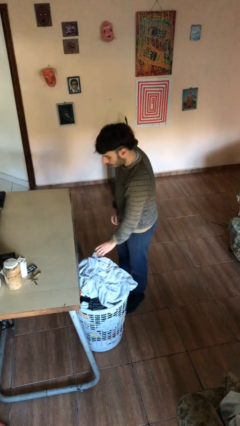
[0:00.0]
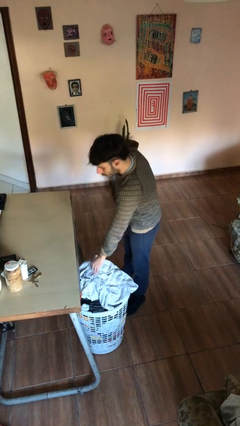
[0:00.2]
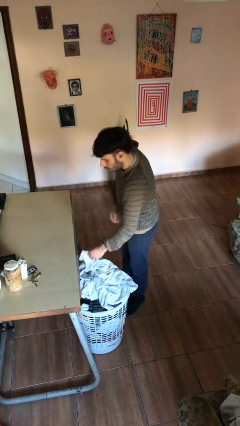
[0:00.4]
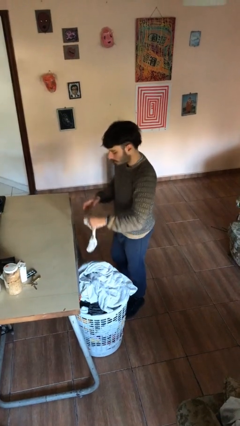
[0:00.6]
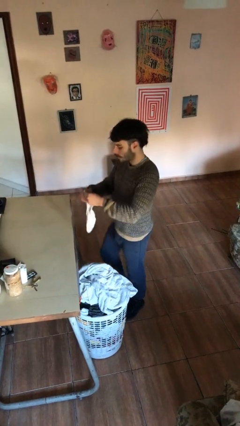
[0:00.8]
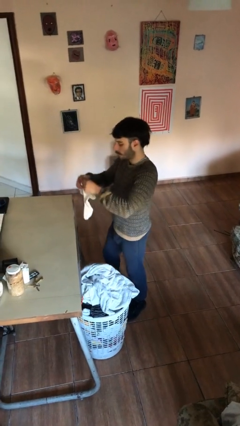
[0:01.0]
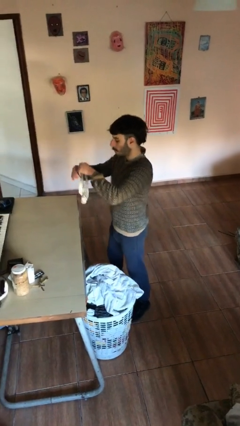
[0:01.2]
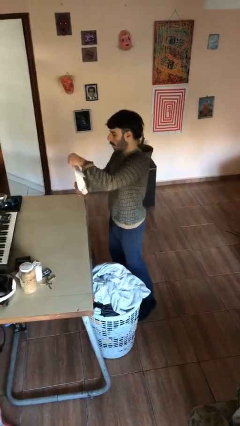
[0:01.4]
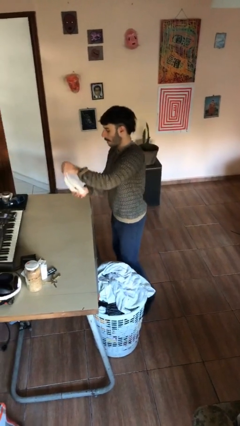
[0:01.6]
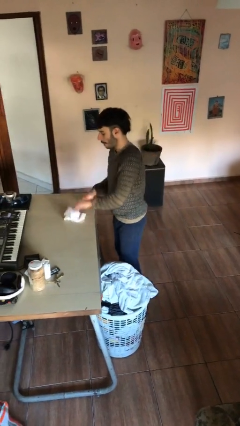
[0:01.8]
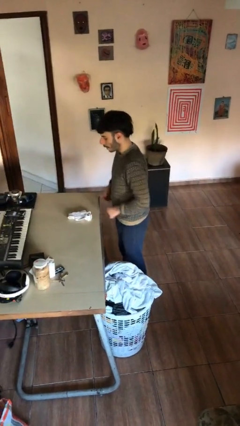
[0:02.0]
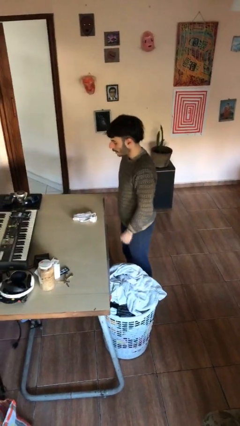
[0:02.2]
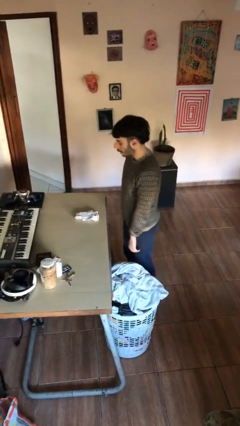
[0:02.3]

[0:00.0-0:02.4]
person folds socks

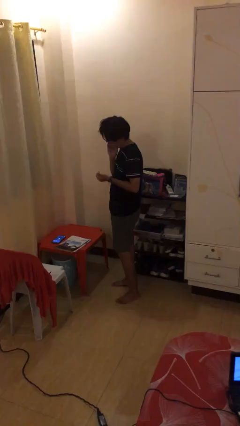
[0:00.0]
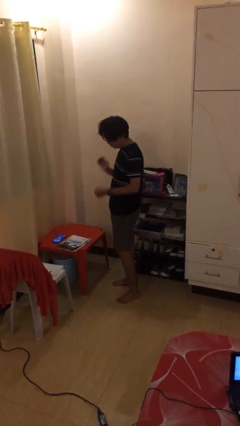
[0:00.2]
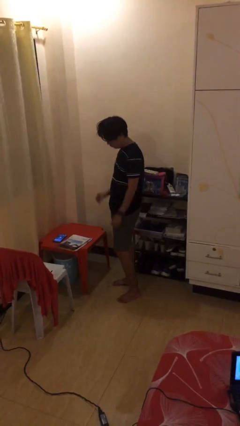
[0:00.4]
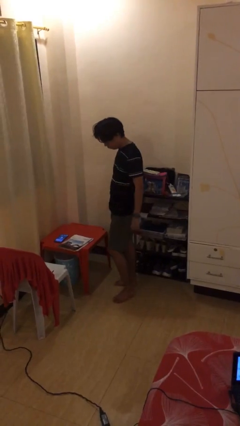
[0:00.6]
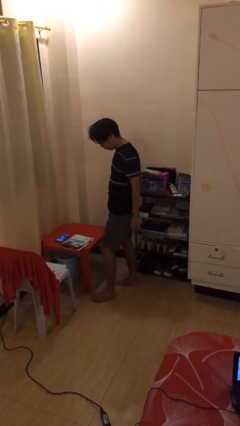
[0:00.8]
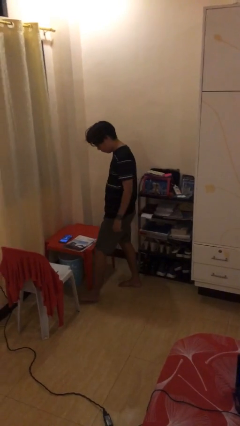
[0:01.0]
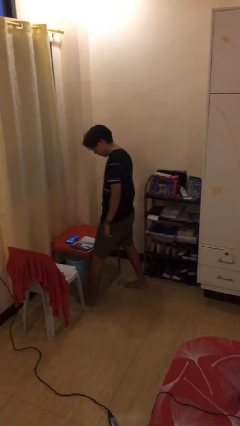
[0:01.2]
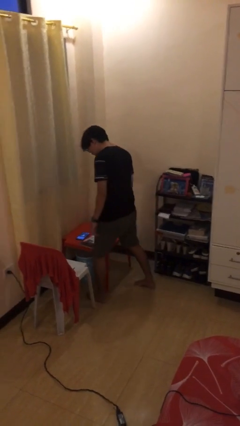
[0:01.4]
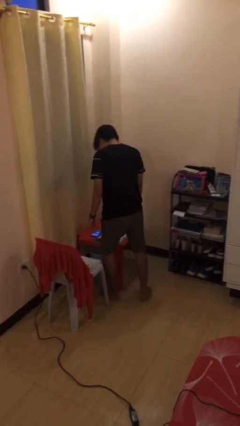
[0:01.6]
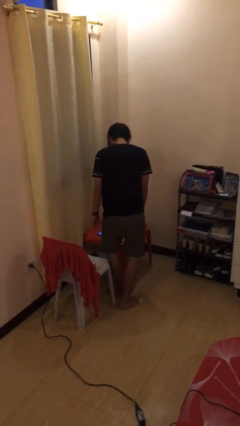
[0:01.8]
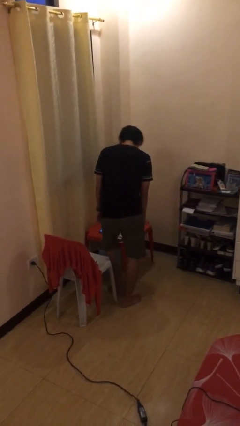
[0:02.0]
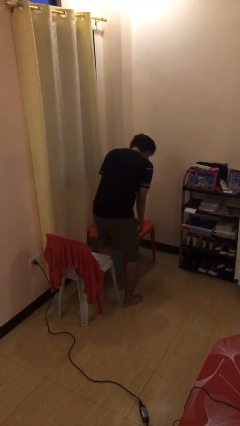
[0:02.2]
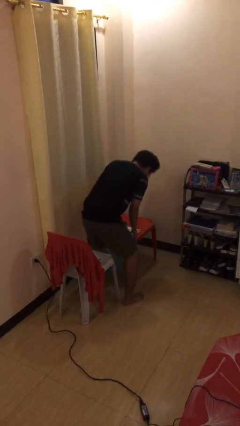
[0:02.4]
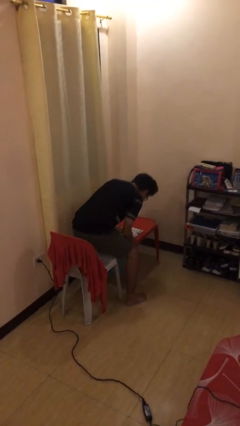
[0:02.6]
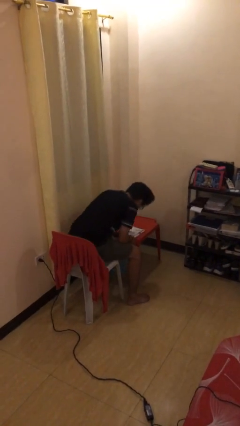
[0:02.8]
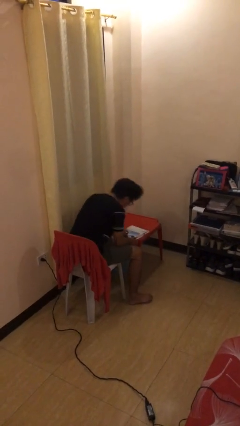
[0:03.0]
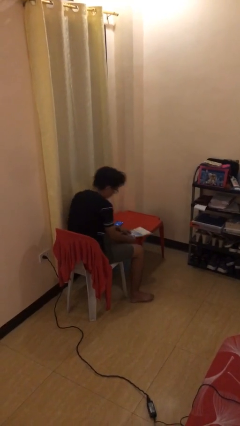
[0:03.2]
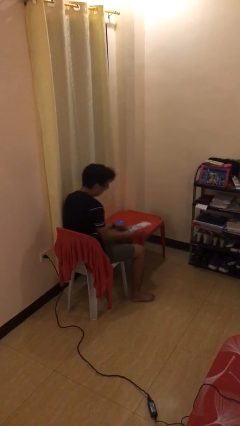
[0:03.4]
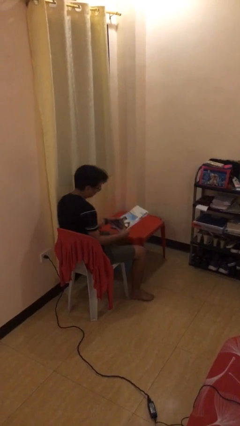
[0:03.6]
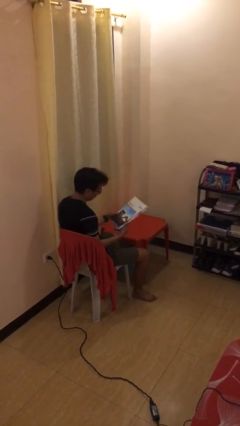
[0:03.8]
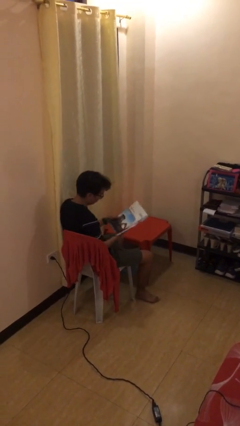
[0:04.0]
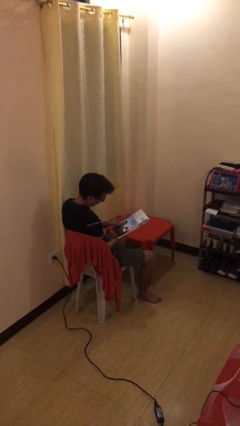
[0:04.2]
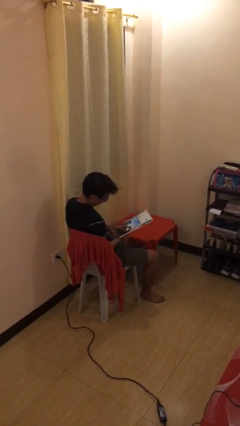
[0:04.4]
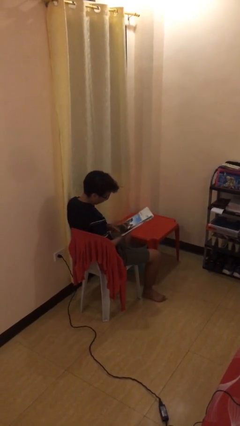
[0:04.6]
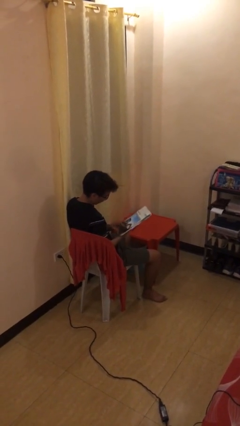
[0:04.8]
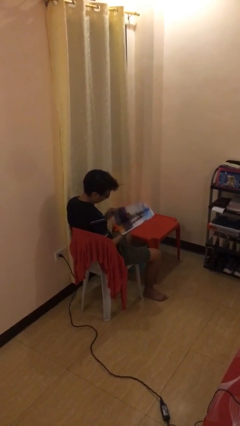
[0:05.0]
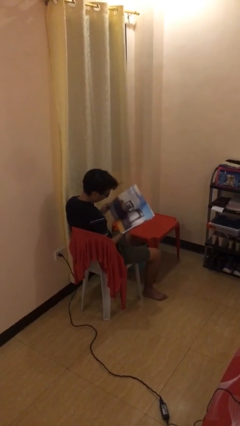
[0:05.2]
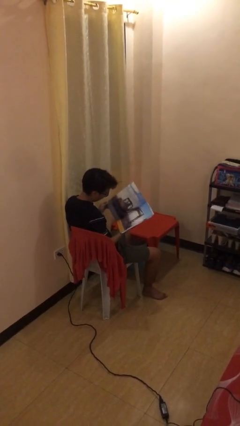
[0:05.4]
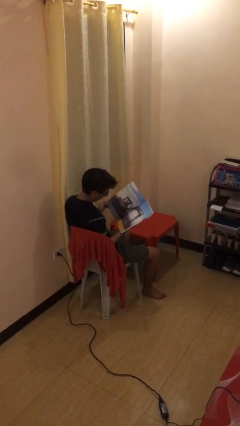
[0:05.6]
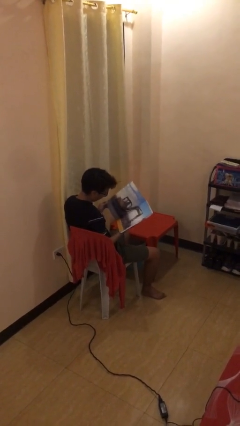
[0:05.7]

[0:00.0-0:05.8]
person sits down

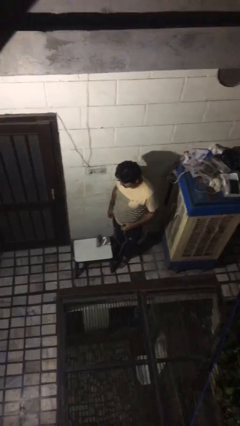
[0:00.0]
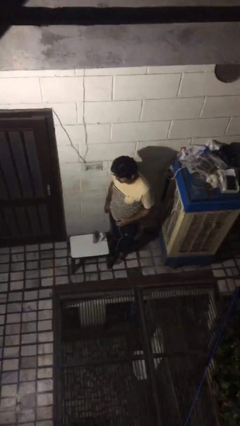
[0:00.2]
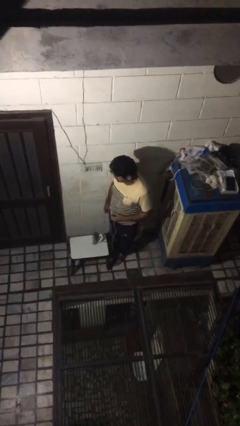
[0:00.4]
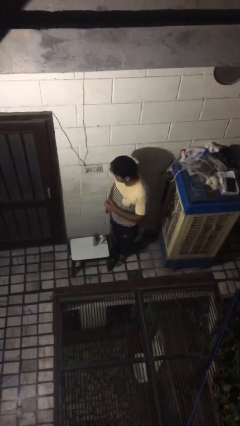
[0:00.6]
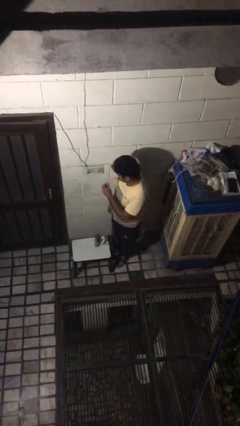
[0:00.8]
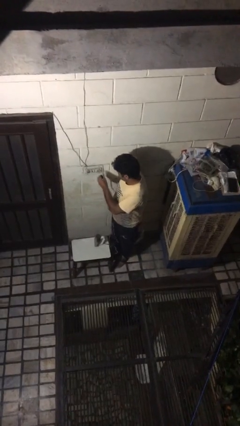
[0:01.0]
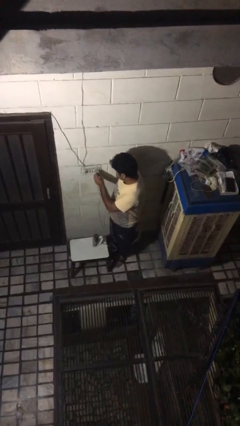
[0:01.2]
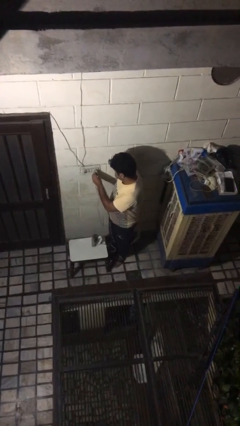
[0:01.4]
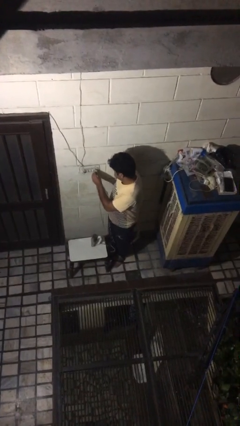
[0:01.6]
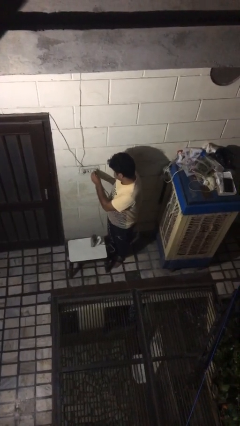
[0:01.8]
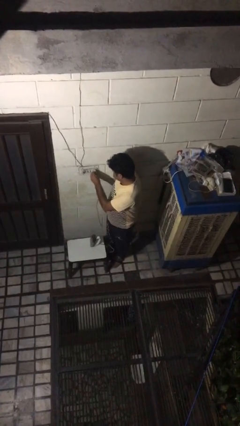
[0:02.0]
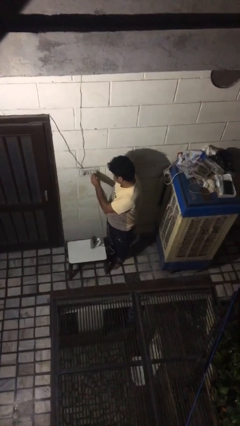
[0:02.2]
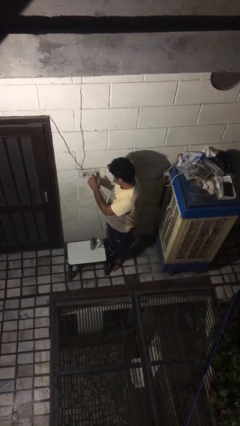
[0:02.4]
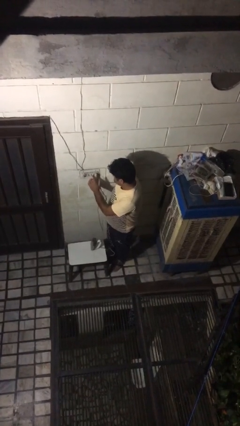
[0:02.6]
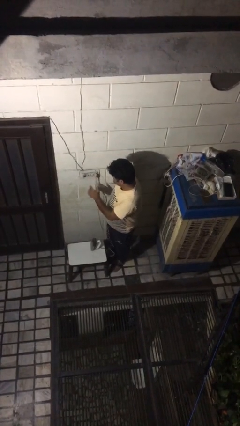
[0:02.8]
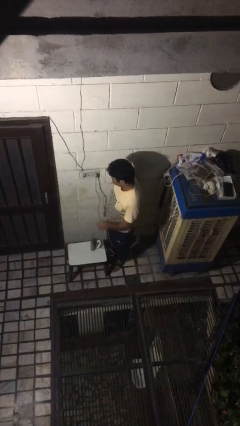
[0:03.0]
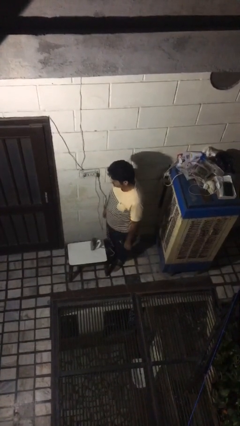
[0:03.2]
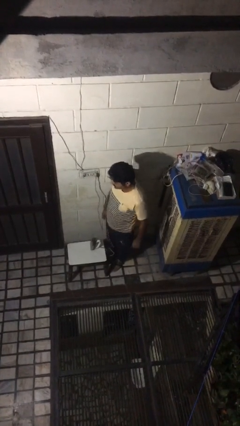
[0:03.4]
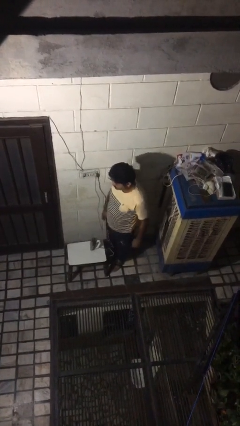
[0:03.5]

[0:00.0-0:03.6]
person plugs into electrical socket

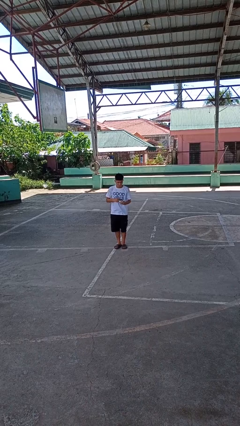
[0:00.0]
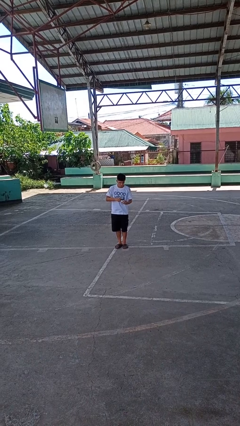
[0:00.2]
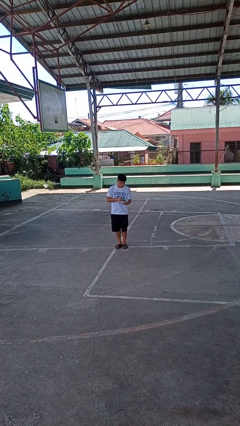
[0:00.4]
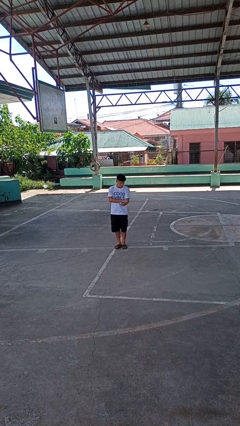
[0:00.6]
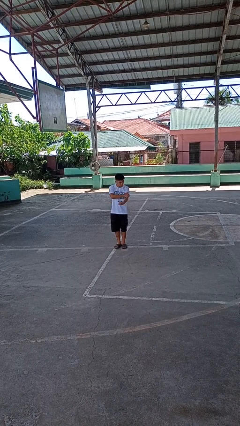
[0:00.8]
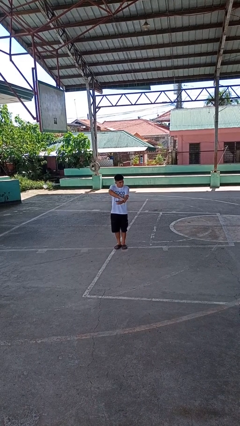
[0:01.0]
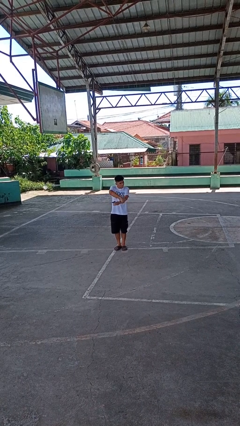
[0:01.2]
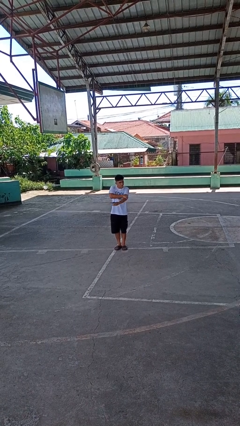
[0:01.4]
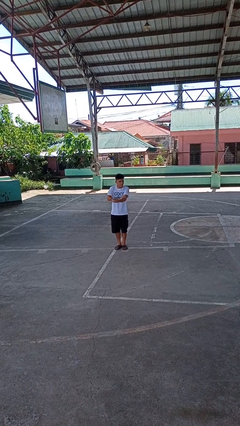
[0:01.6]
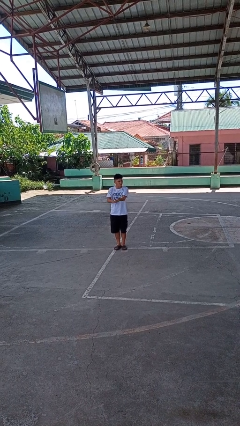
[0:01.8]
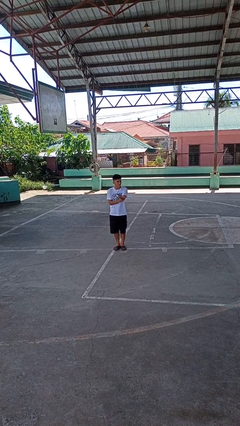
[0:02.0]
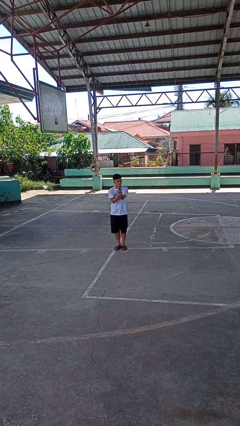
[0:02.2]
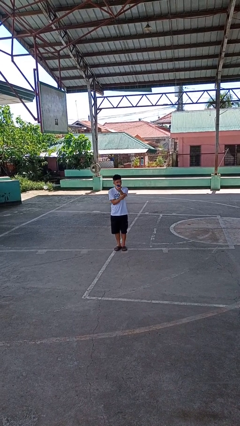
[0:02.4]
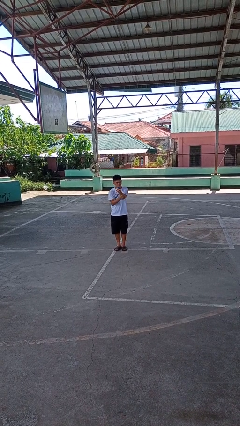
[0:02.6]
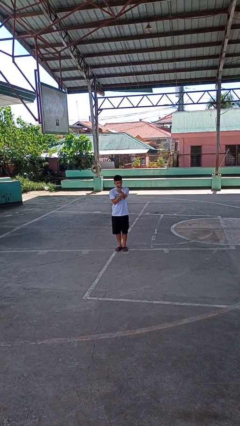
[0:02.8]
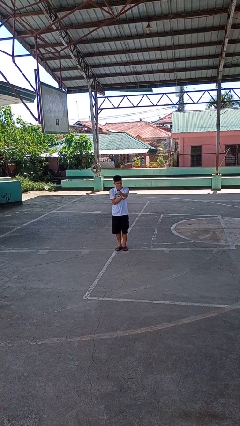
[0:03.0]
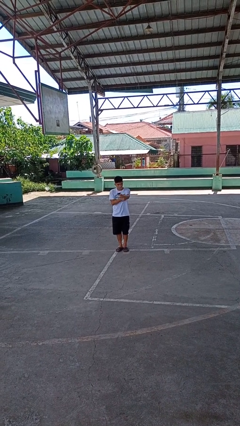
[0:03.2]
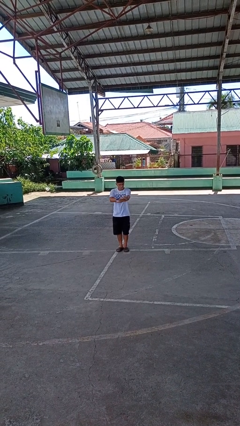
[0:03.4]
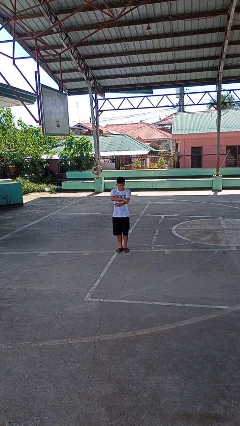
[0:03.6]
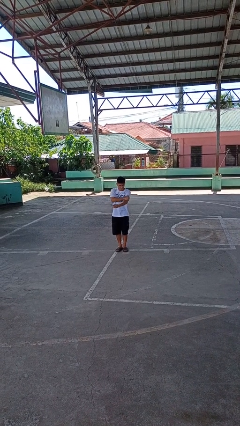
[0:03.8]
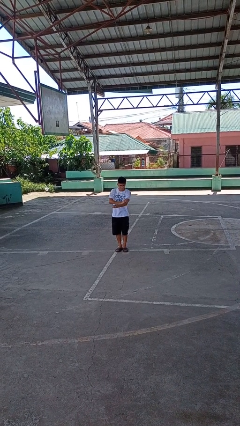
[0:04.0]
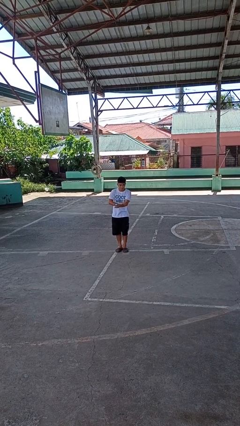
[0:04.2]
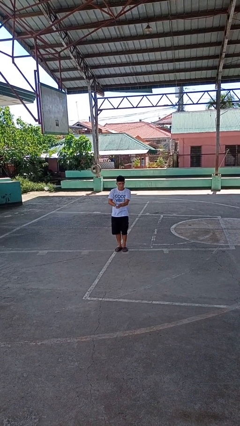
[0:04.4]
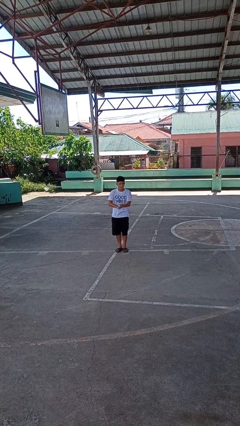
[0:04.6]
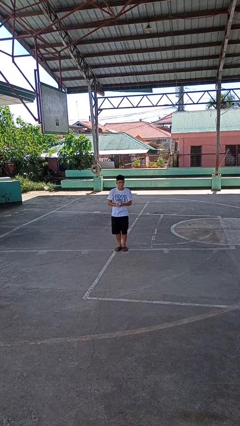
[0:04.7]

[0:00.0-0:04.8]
person applies sunscreen

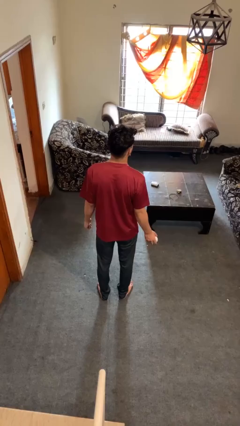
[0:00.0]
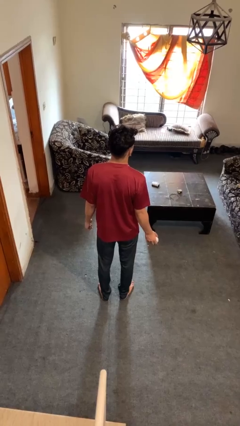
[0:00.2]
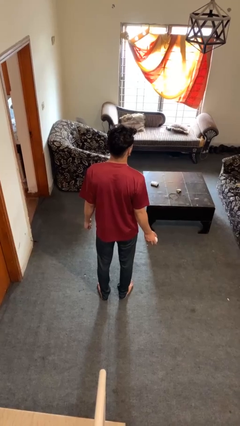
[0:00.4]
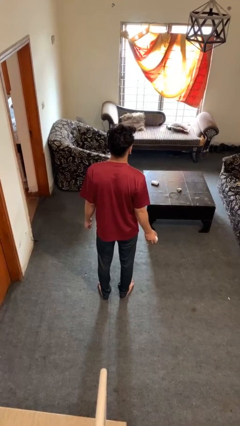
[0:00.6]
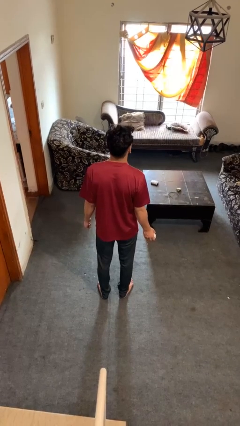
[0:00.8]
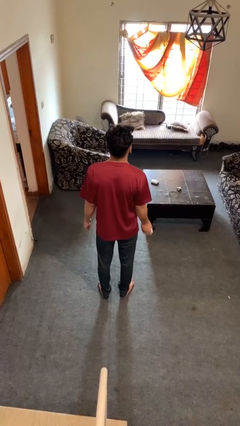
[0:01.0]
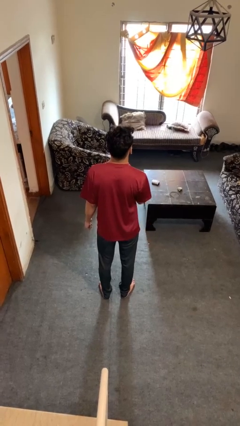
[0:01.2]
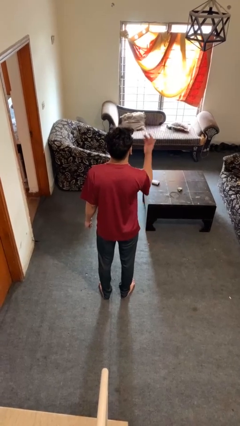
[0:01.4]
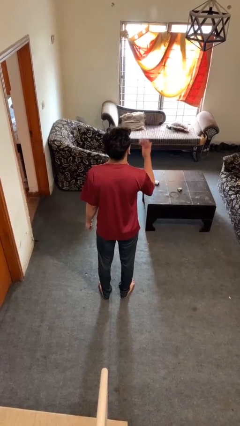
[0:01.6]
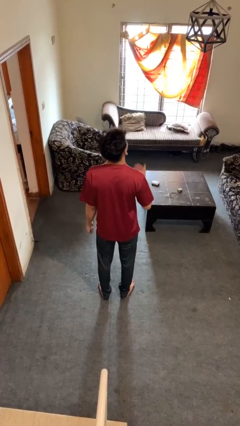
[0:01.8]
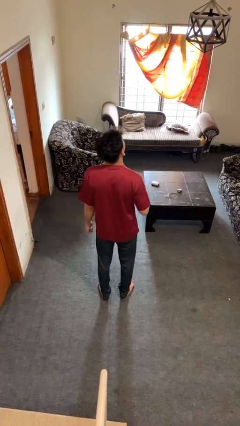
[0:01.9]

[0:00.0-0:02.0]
person drops object
